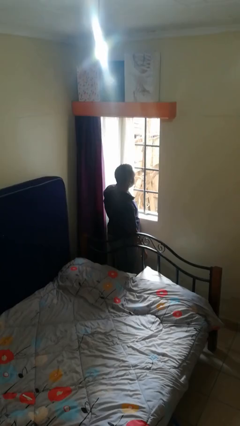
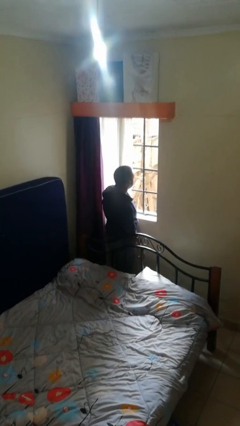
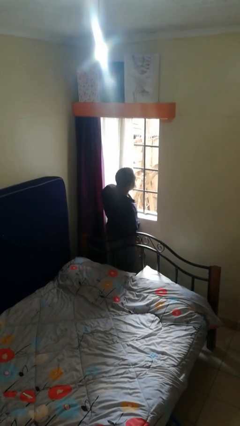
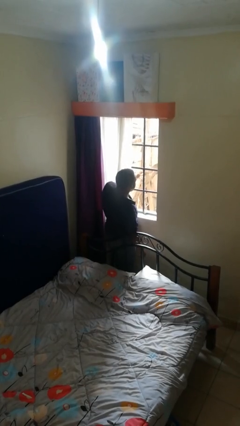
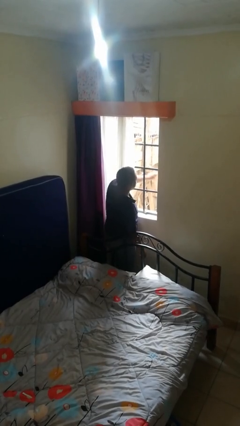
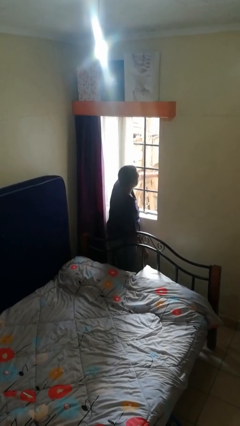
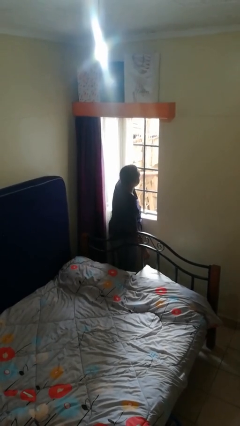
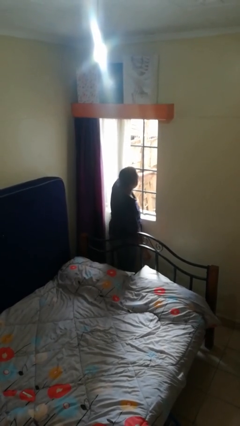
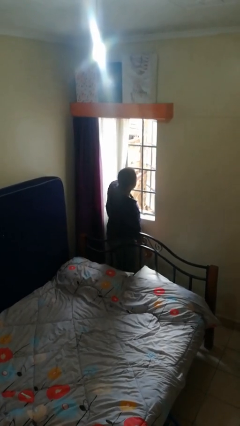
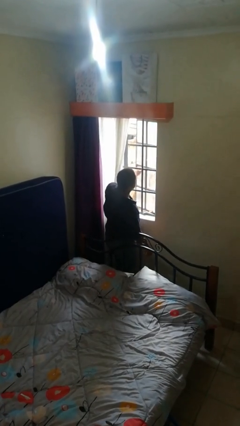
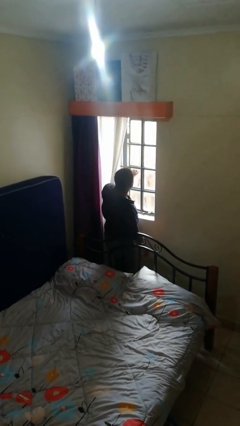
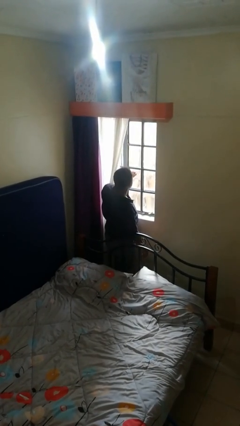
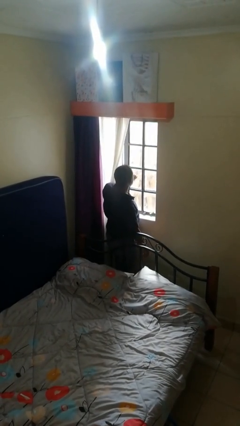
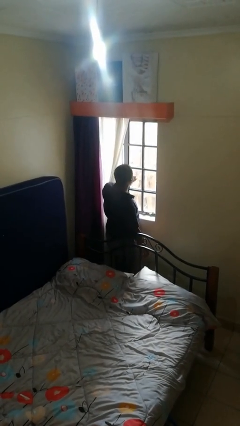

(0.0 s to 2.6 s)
person closes home window

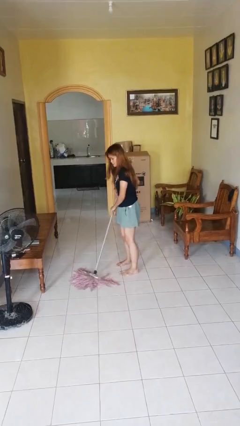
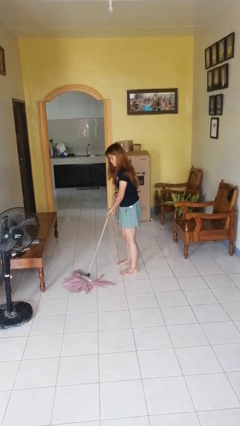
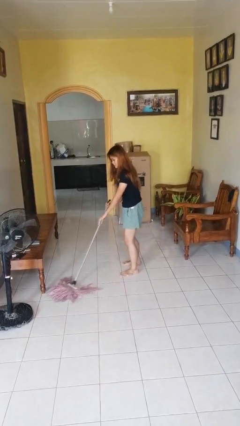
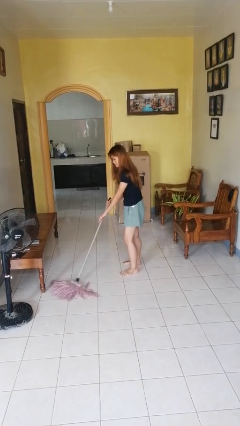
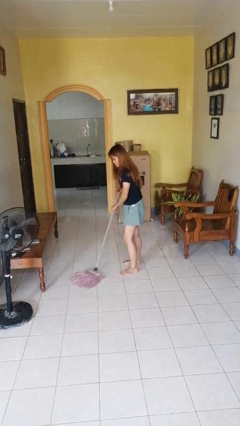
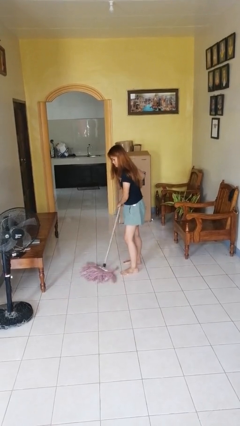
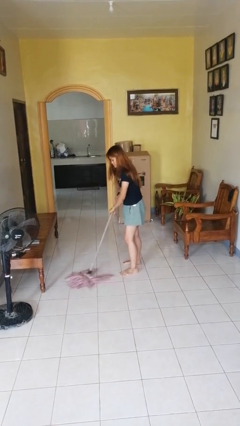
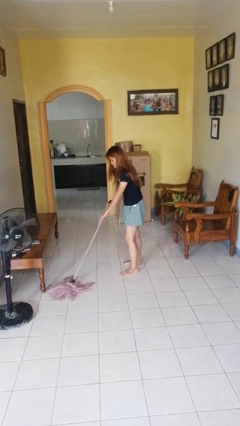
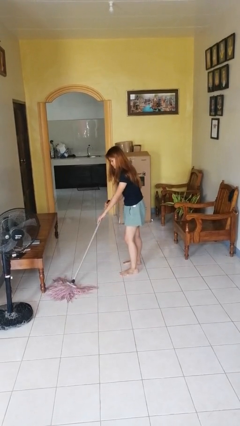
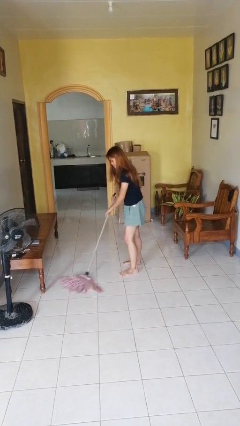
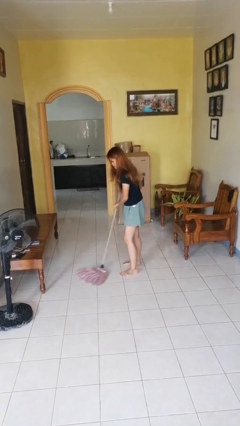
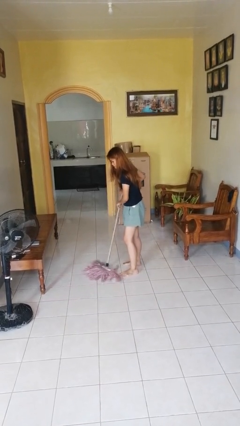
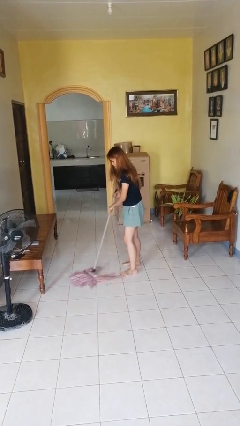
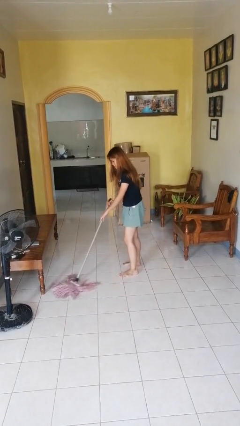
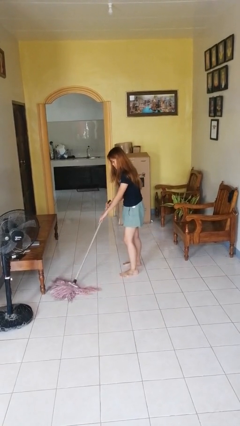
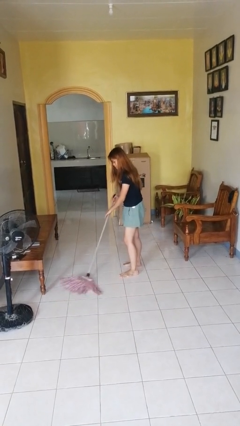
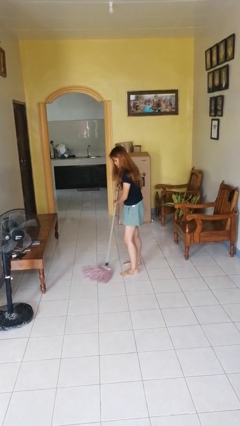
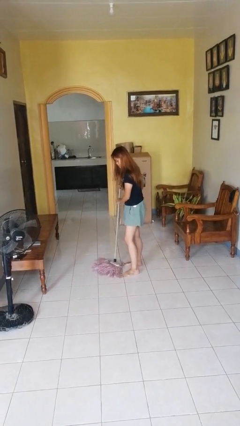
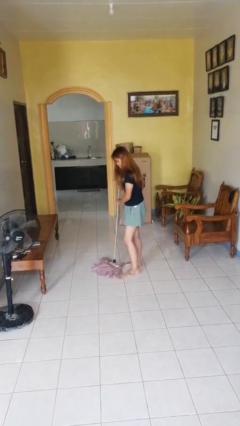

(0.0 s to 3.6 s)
person mops

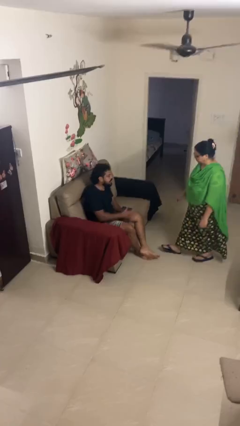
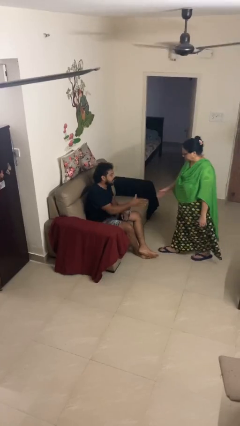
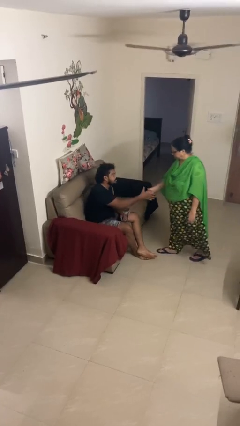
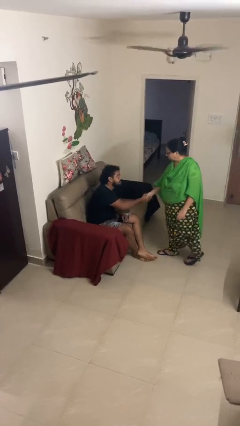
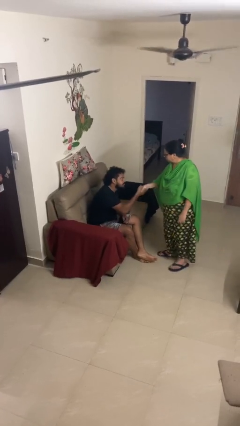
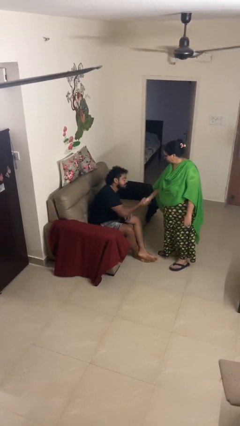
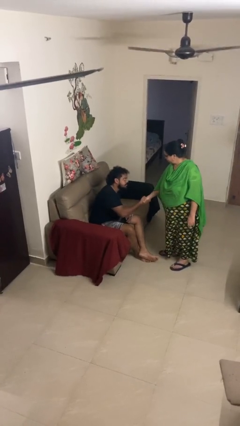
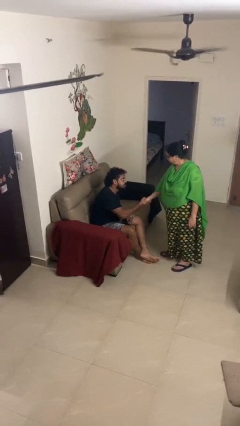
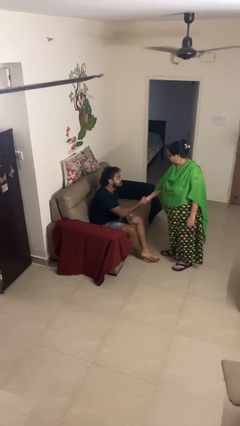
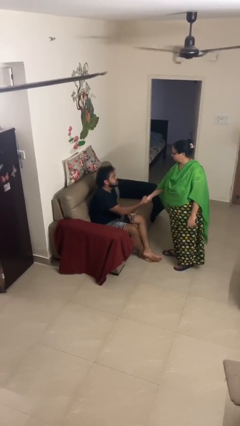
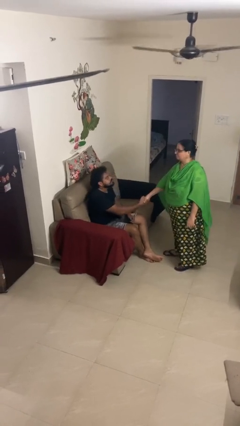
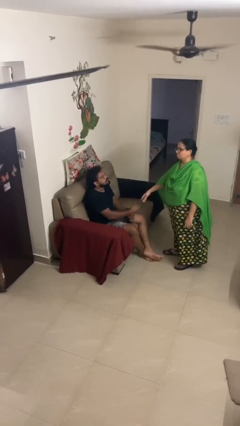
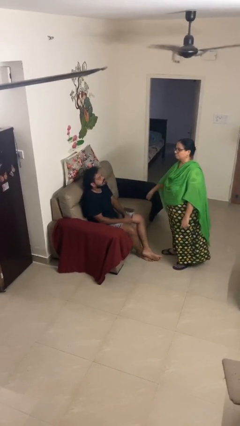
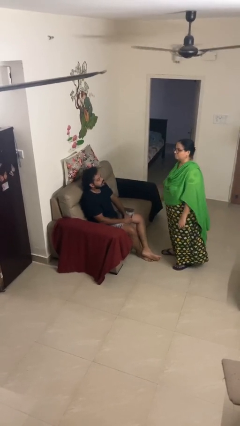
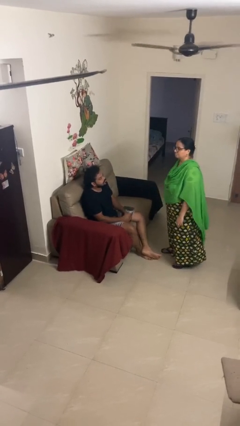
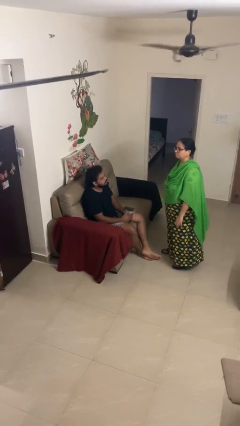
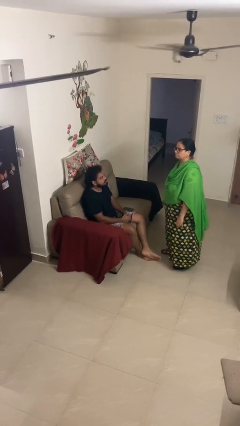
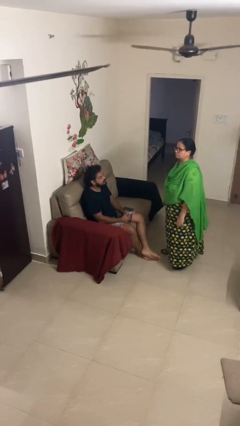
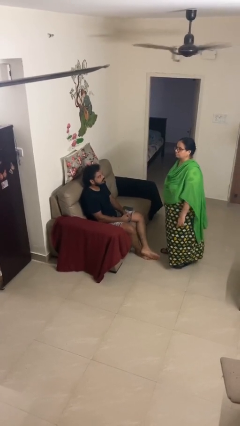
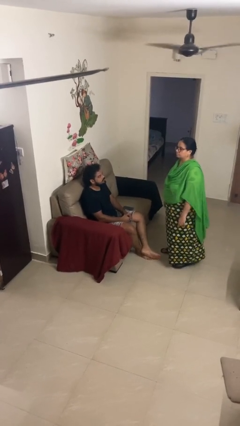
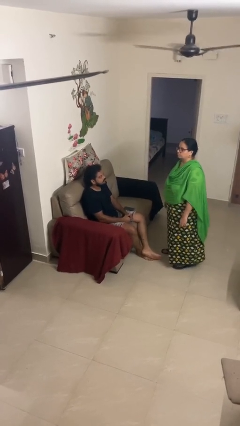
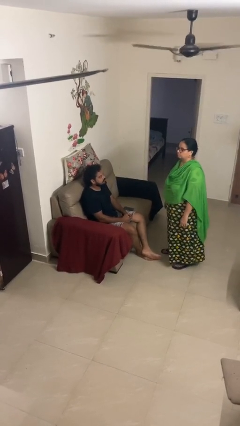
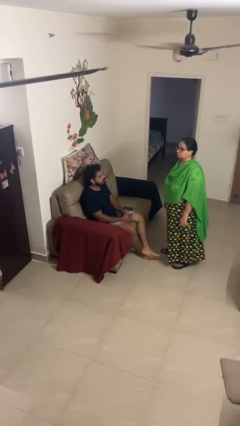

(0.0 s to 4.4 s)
person shakes hand

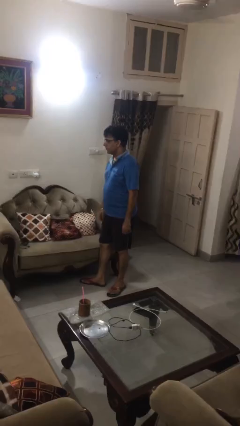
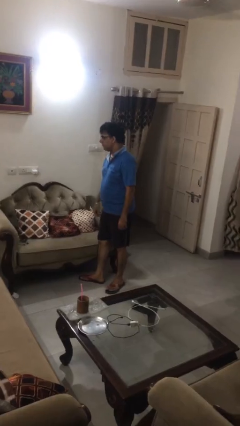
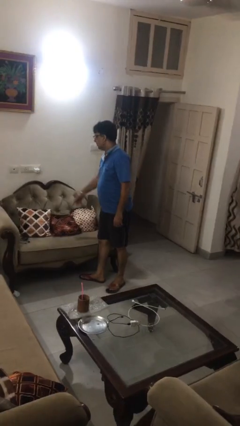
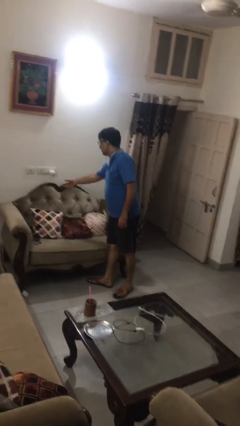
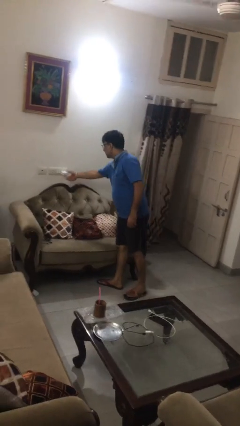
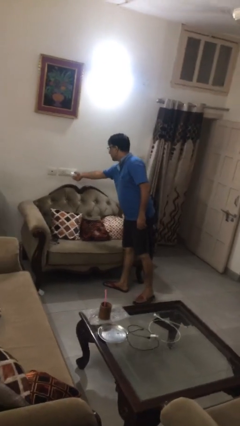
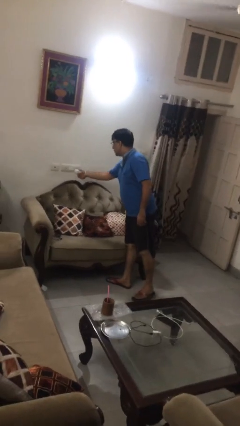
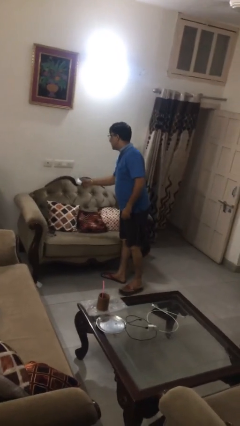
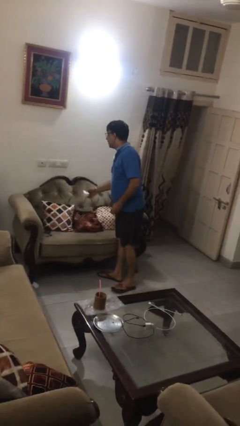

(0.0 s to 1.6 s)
person unplugs from electrical socket

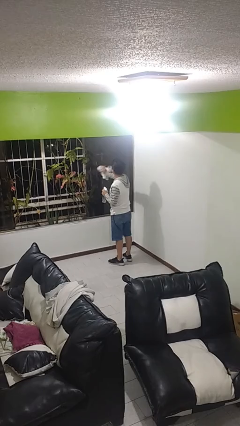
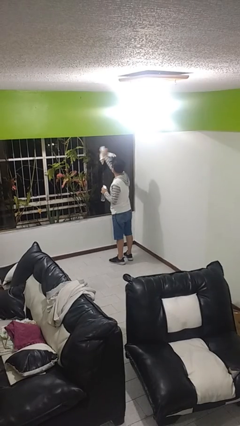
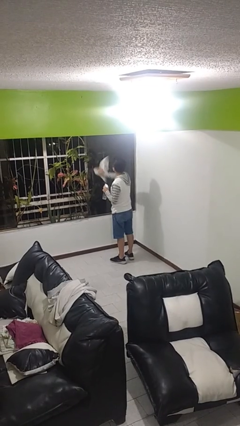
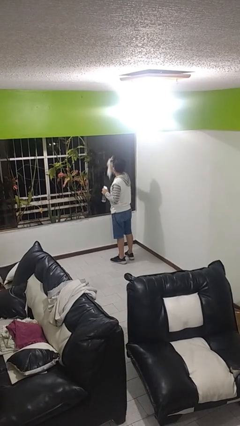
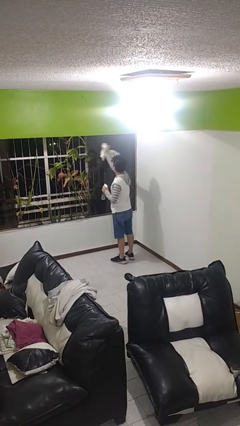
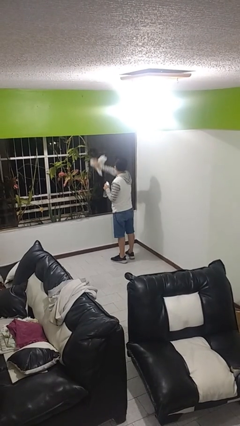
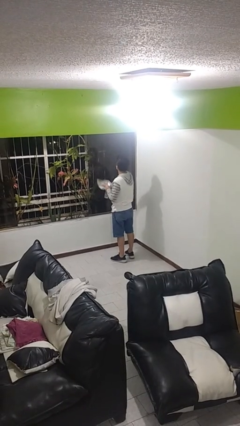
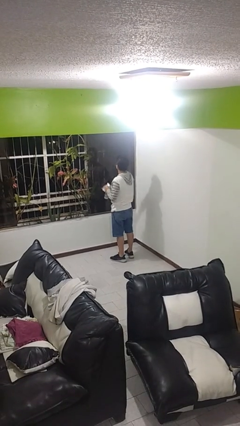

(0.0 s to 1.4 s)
person washes window

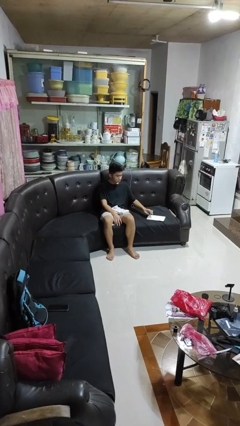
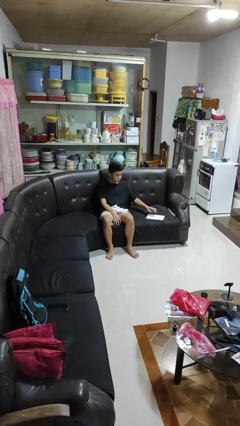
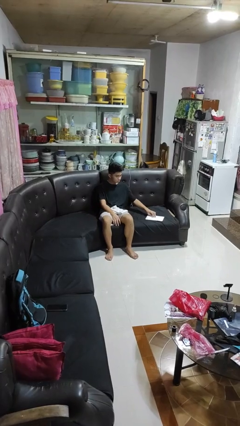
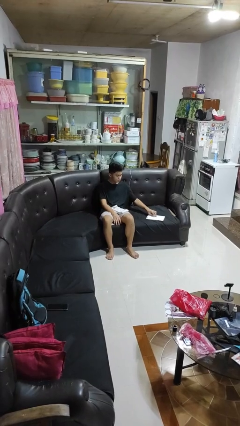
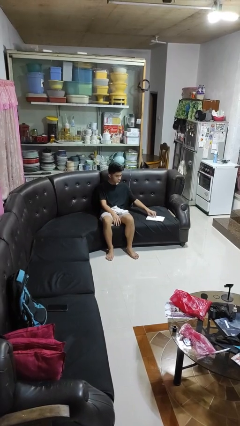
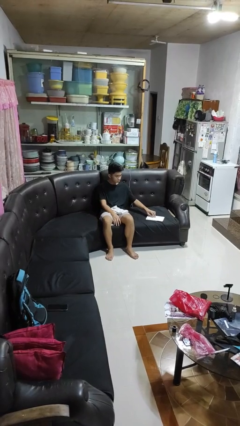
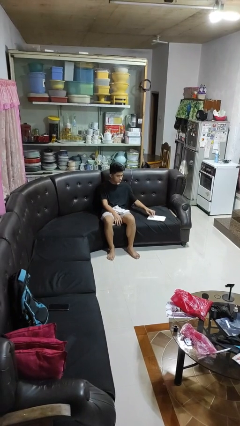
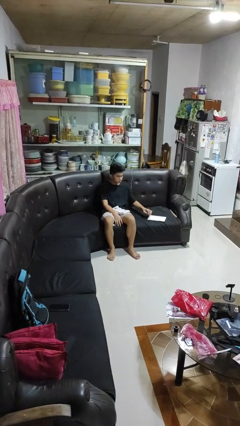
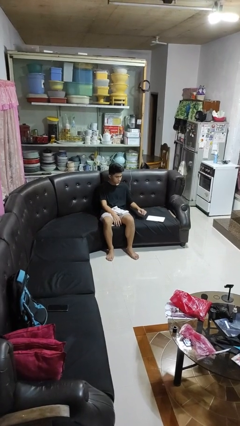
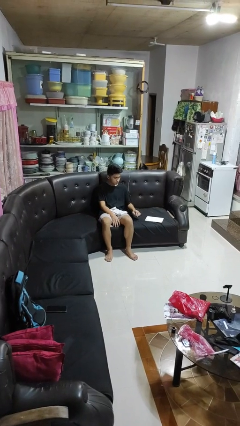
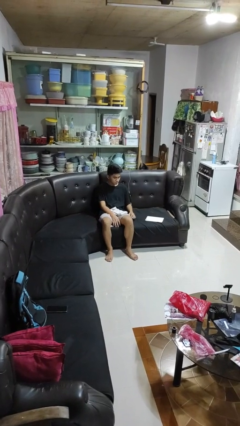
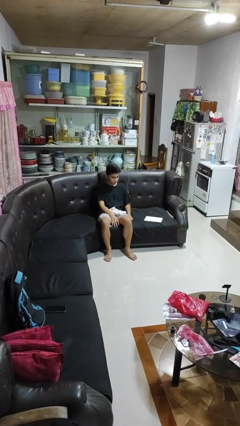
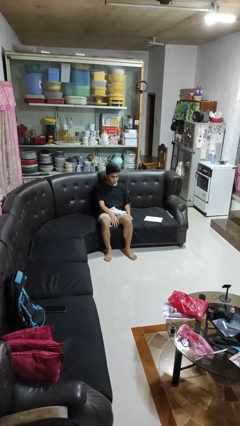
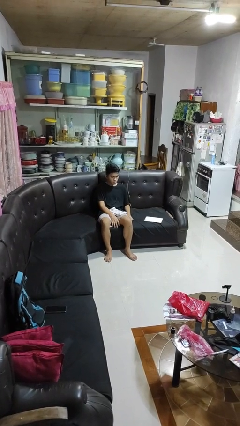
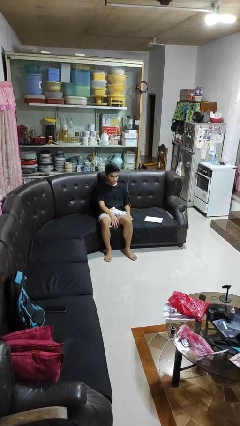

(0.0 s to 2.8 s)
person taps object with finger

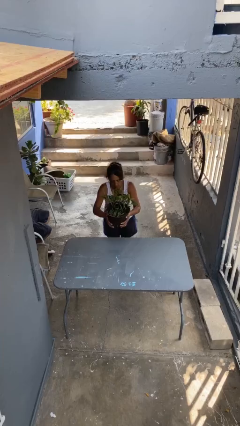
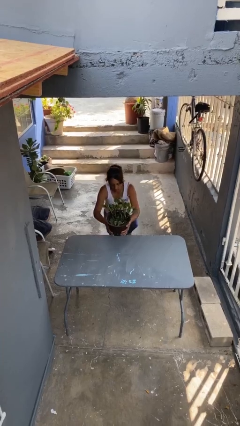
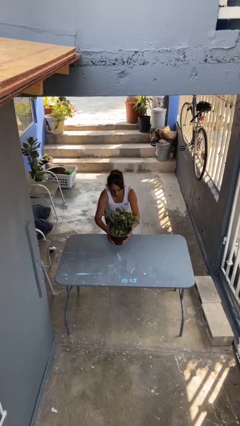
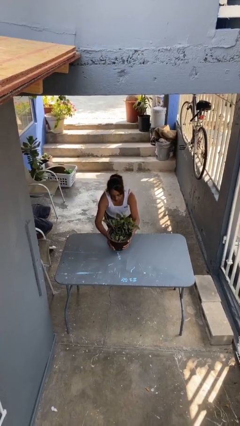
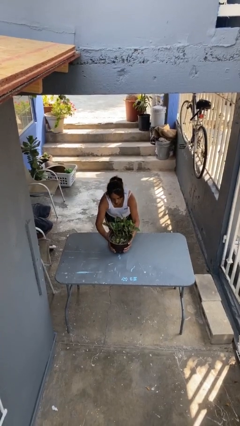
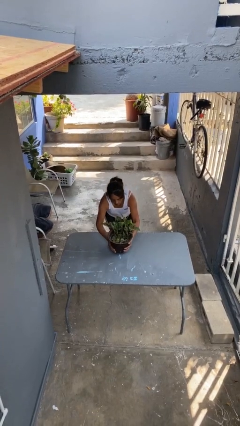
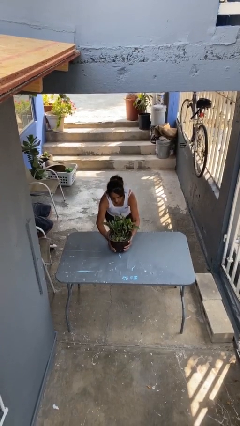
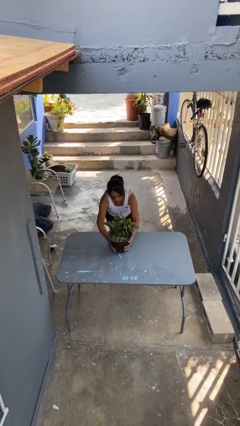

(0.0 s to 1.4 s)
person puts down object on table
